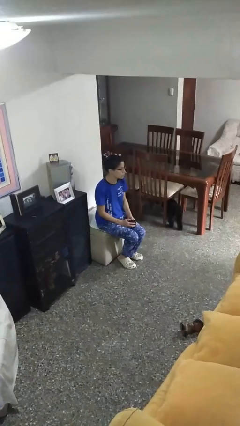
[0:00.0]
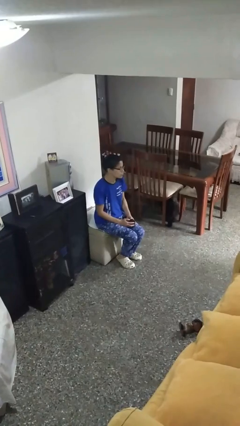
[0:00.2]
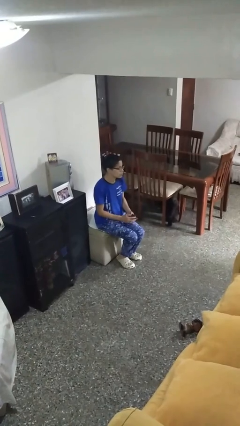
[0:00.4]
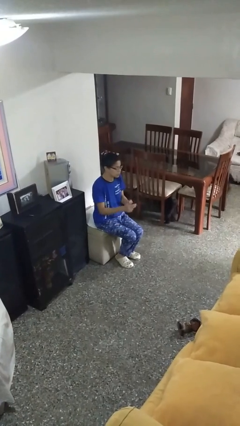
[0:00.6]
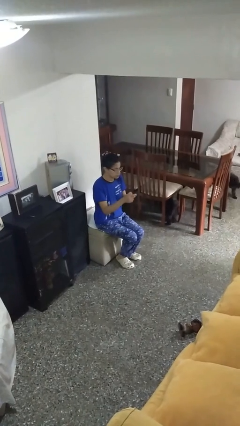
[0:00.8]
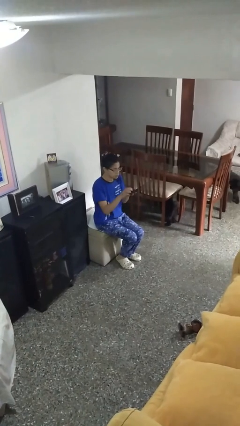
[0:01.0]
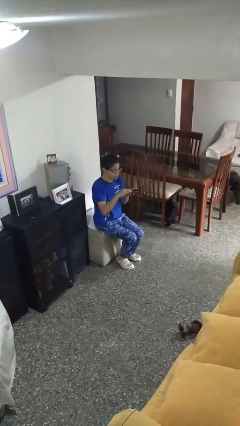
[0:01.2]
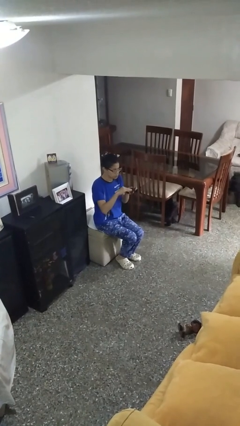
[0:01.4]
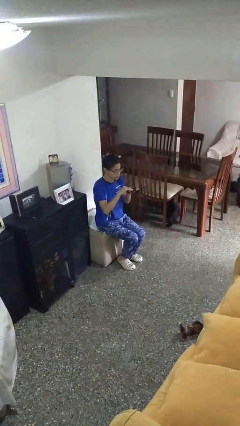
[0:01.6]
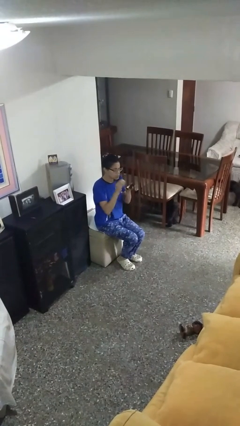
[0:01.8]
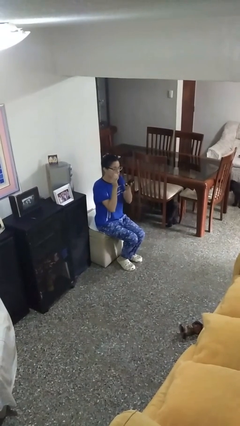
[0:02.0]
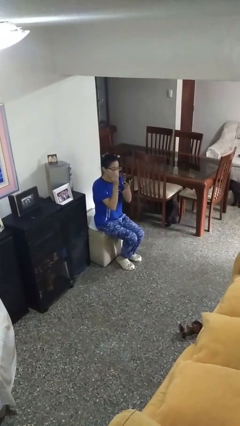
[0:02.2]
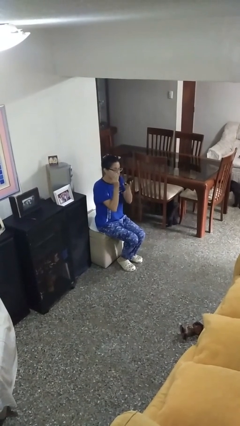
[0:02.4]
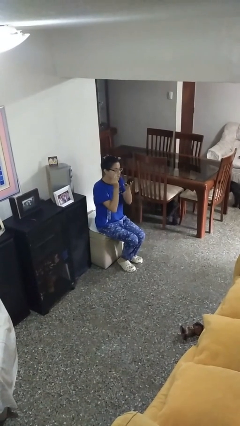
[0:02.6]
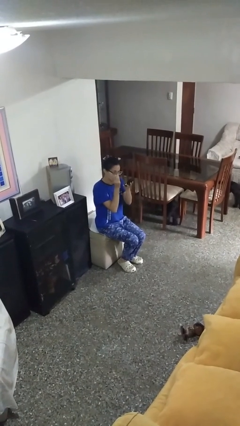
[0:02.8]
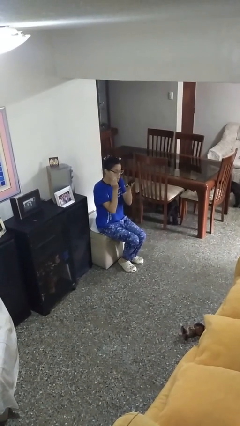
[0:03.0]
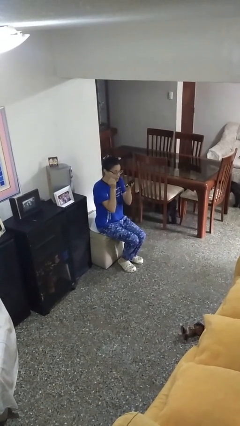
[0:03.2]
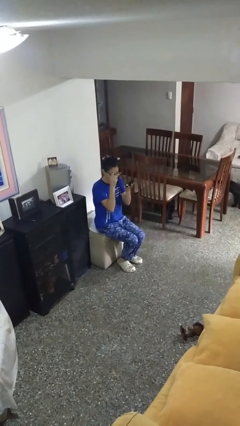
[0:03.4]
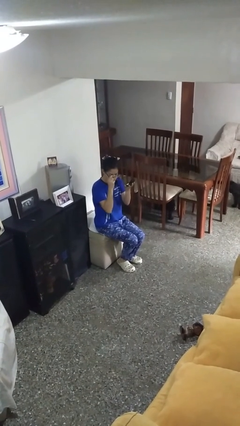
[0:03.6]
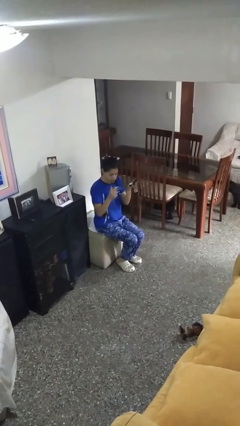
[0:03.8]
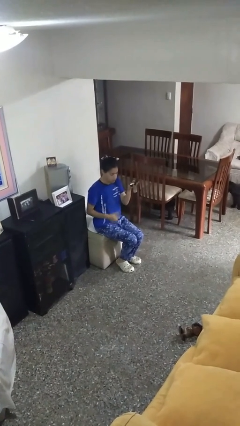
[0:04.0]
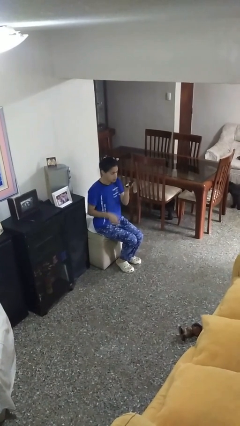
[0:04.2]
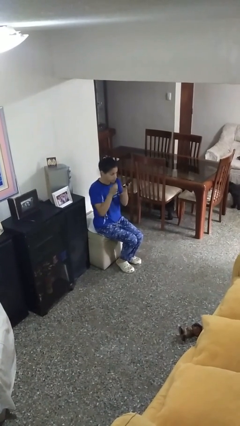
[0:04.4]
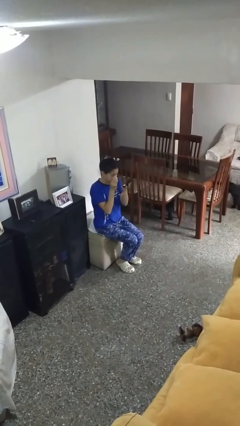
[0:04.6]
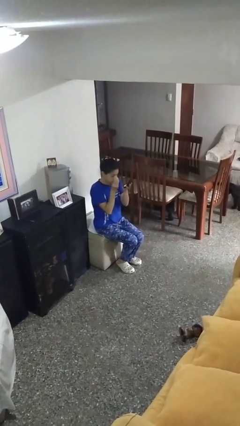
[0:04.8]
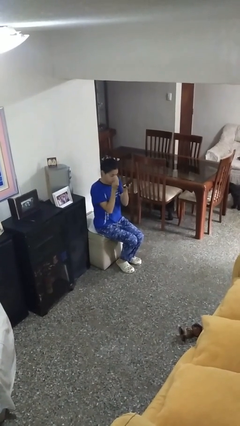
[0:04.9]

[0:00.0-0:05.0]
person applies foundation makeup

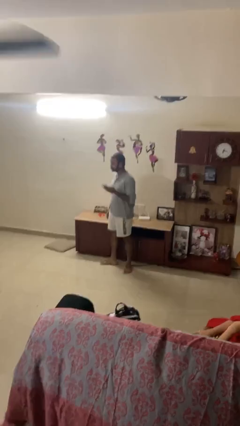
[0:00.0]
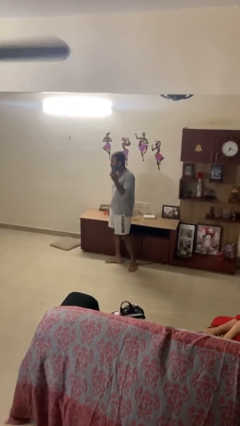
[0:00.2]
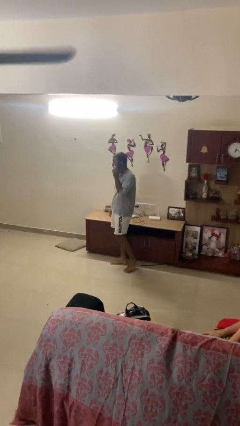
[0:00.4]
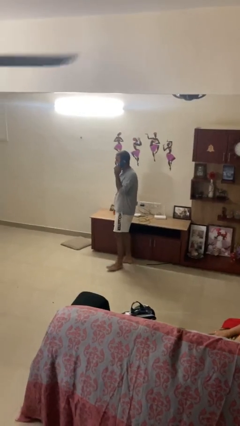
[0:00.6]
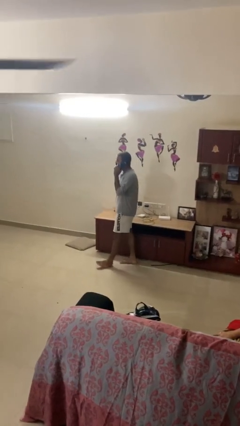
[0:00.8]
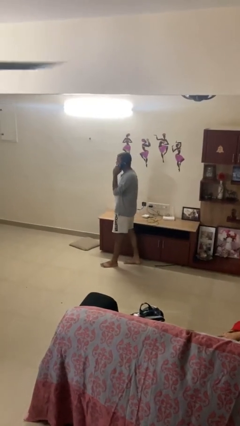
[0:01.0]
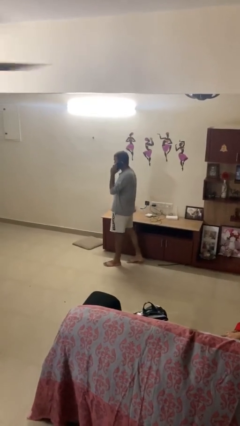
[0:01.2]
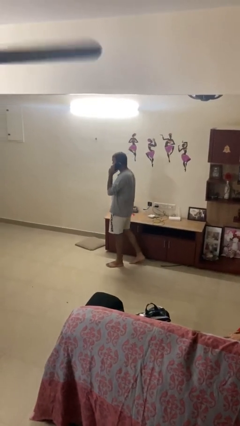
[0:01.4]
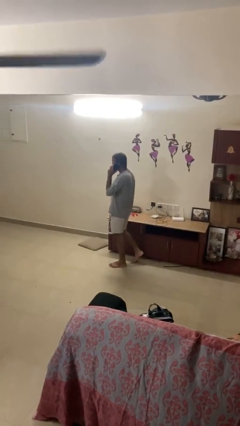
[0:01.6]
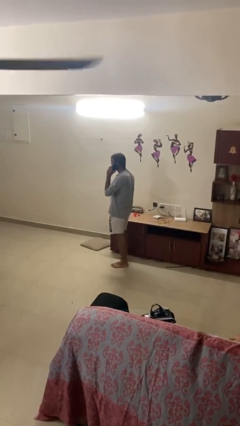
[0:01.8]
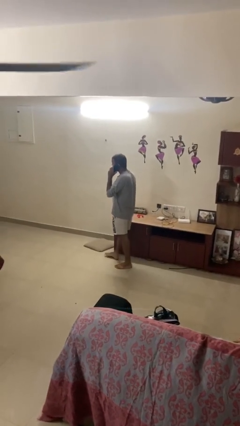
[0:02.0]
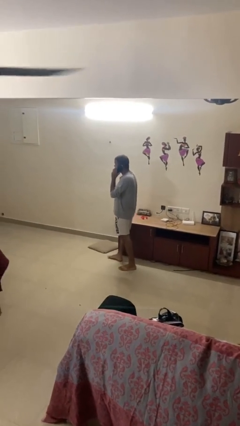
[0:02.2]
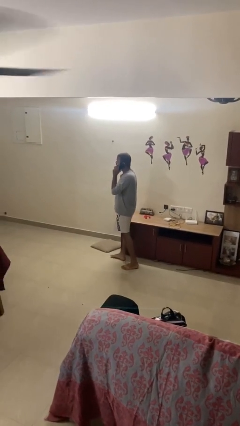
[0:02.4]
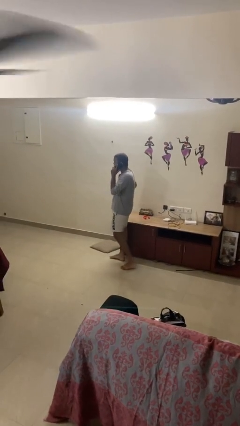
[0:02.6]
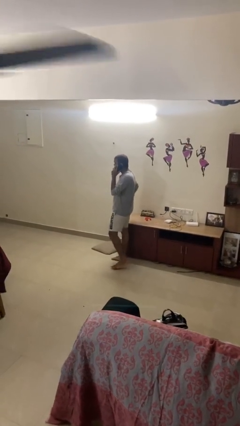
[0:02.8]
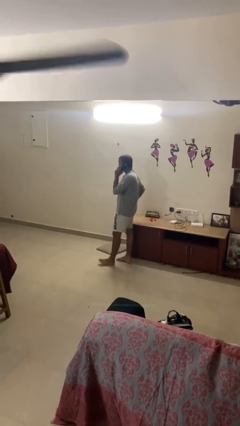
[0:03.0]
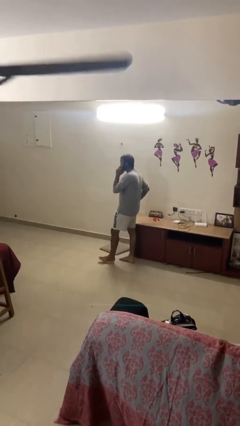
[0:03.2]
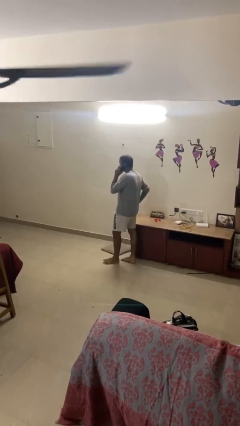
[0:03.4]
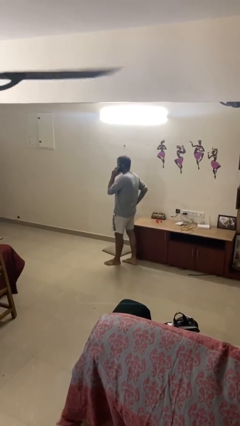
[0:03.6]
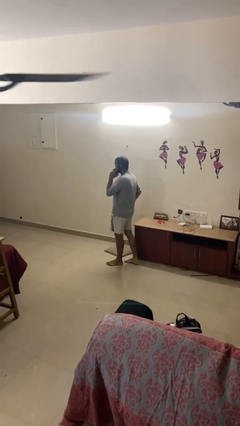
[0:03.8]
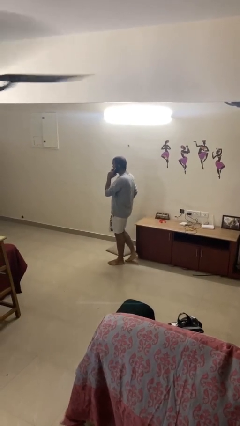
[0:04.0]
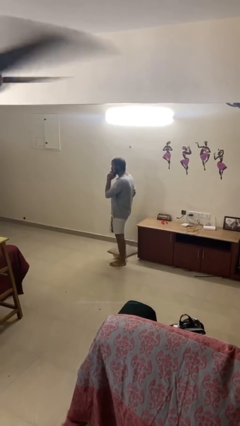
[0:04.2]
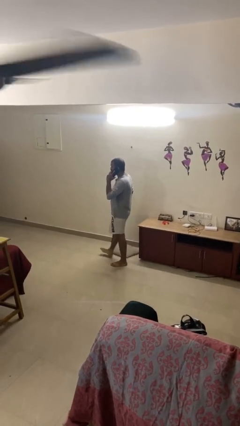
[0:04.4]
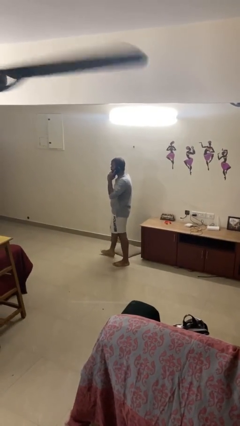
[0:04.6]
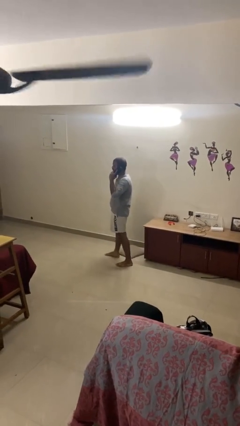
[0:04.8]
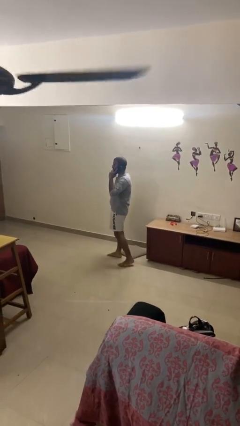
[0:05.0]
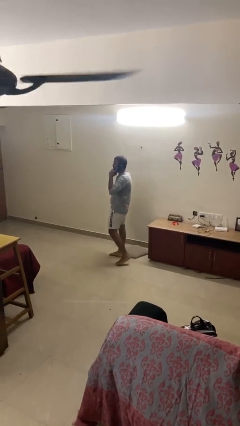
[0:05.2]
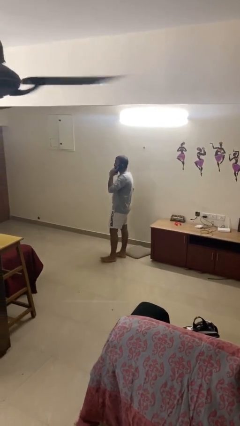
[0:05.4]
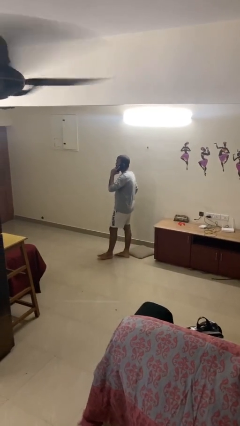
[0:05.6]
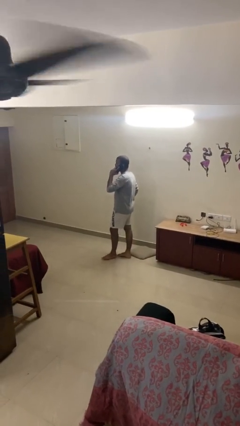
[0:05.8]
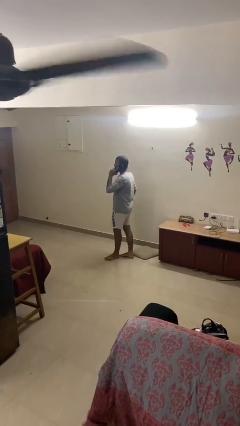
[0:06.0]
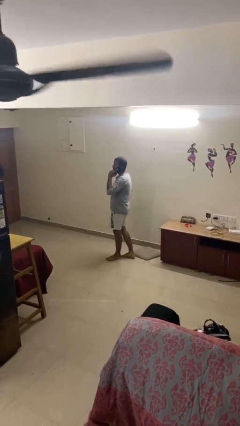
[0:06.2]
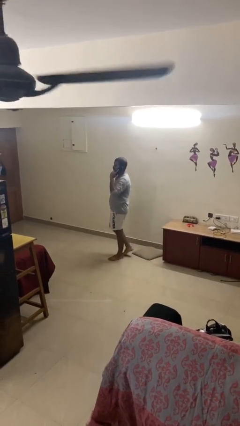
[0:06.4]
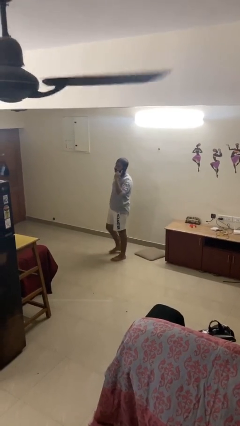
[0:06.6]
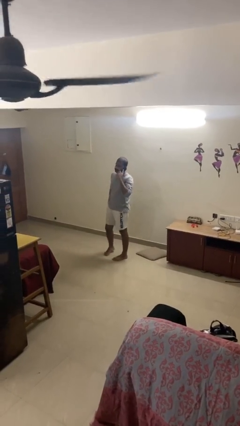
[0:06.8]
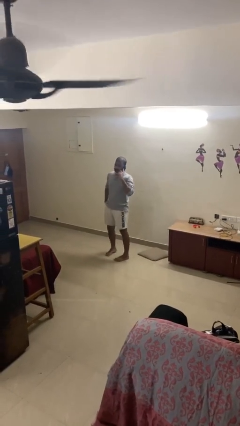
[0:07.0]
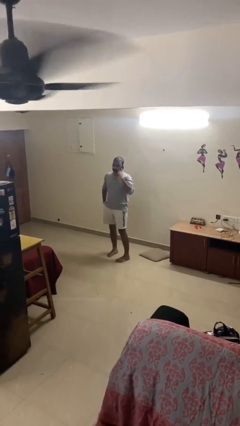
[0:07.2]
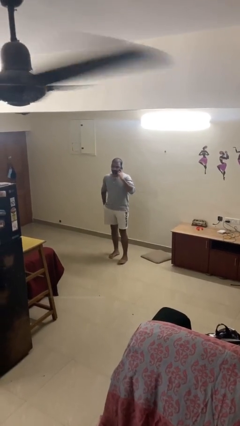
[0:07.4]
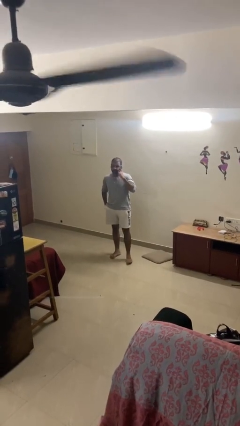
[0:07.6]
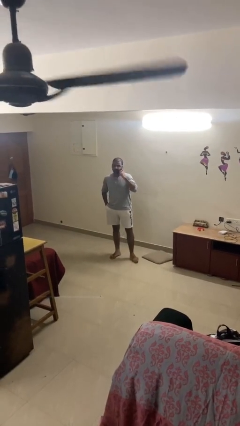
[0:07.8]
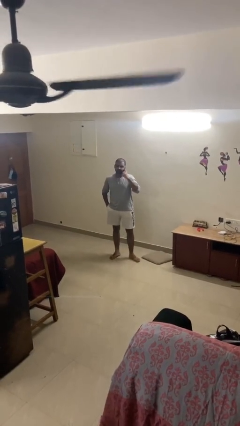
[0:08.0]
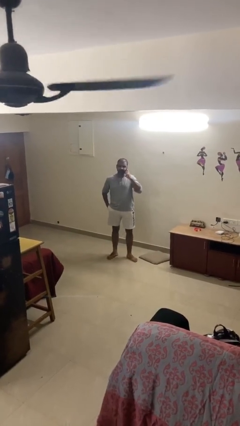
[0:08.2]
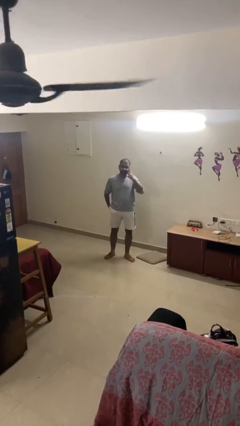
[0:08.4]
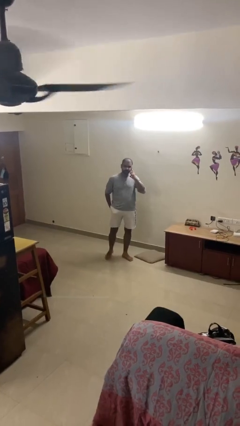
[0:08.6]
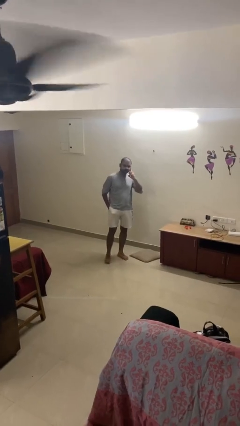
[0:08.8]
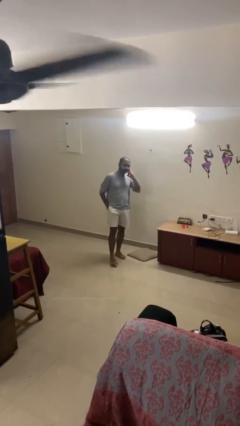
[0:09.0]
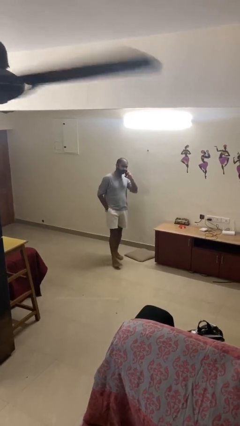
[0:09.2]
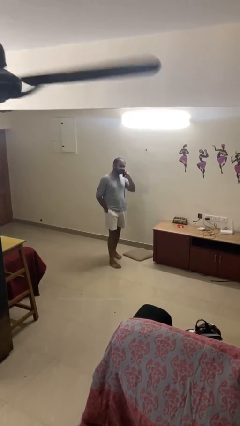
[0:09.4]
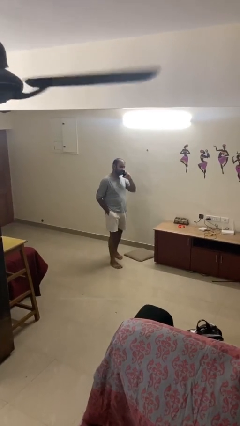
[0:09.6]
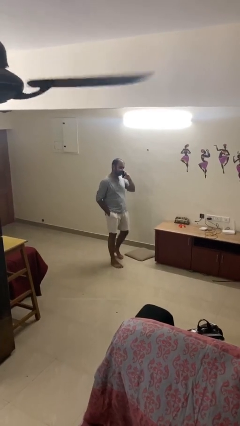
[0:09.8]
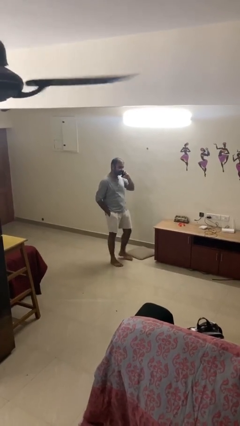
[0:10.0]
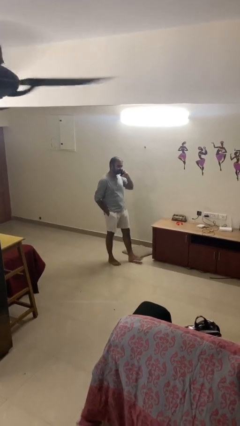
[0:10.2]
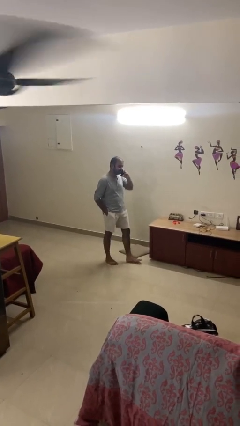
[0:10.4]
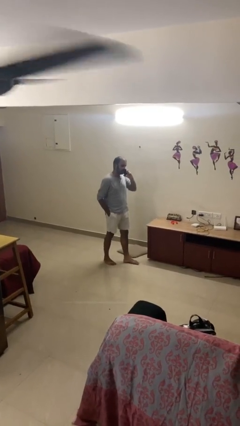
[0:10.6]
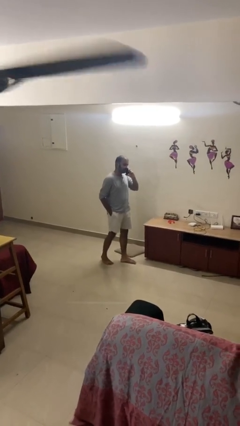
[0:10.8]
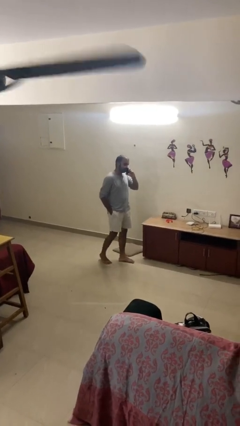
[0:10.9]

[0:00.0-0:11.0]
person talks on phone

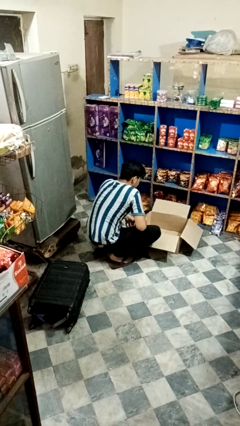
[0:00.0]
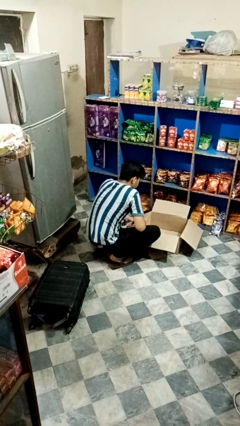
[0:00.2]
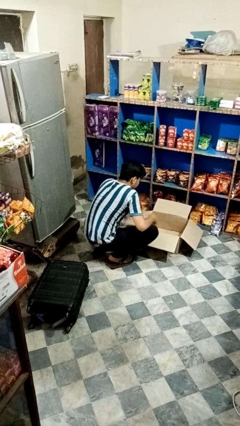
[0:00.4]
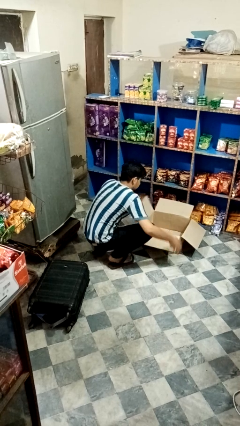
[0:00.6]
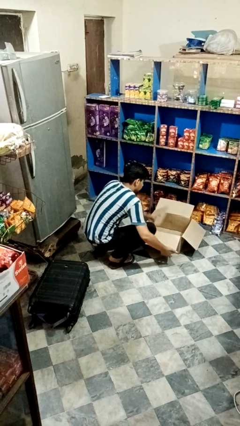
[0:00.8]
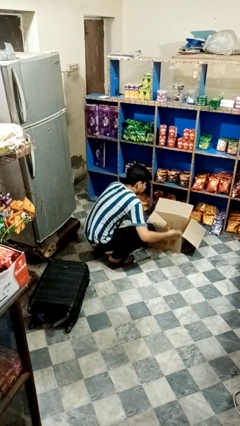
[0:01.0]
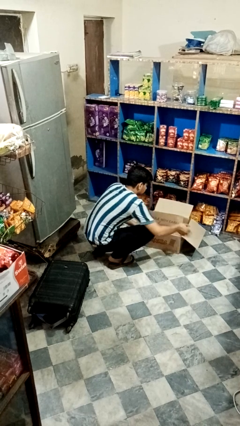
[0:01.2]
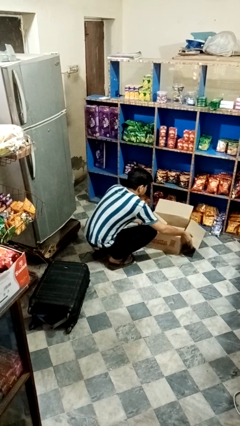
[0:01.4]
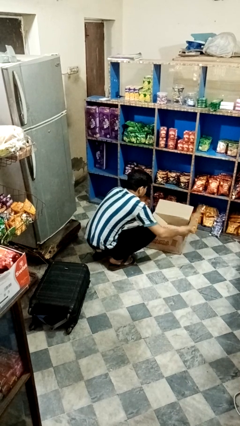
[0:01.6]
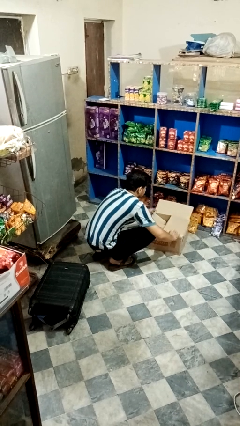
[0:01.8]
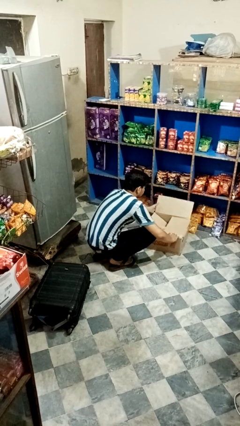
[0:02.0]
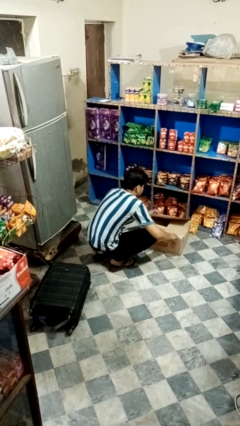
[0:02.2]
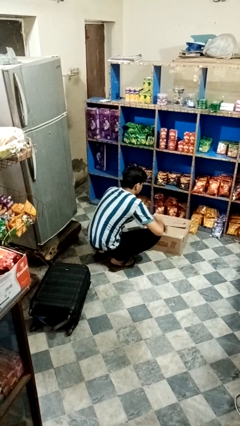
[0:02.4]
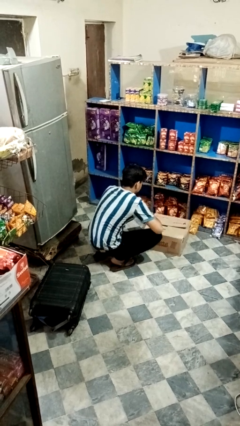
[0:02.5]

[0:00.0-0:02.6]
person closes box
